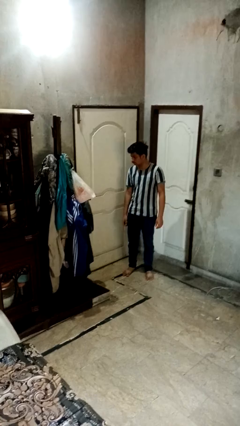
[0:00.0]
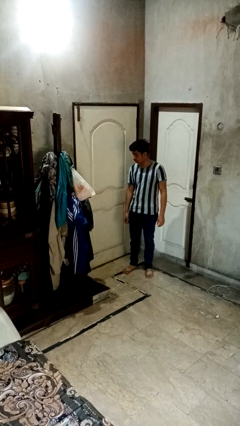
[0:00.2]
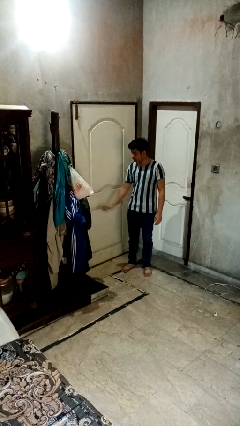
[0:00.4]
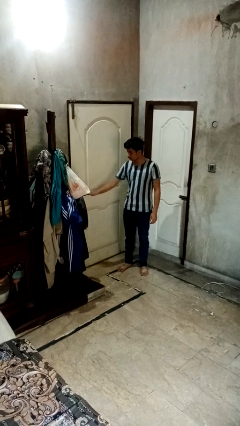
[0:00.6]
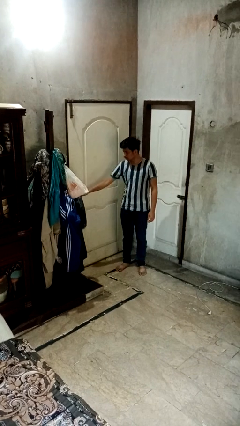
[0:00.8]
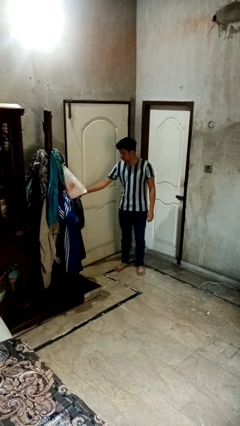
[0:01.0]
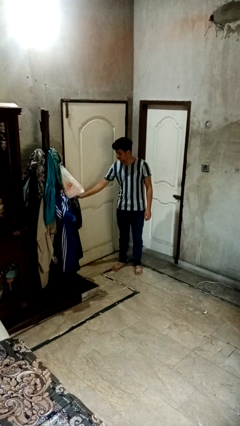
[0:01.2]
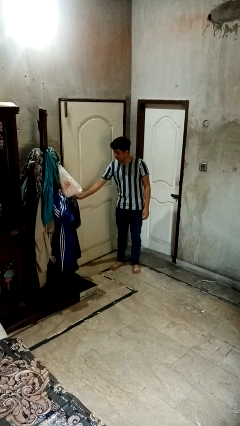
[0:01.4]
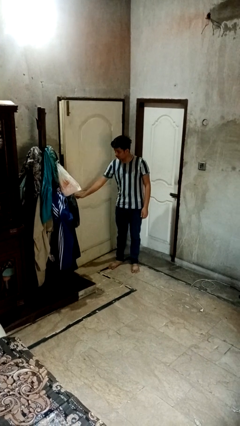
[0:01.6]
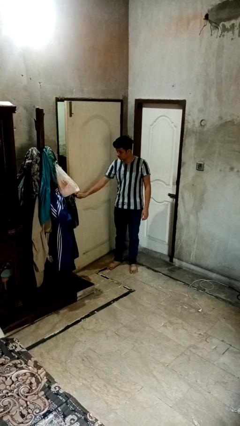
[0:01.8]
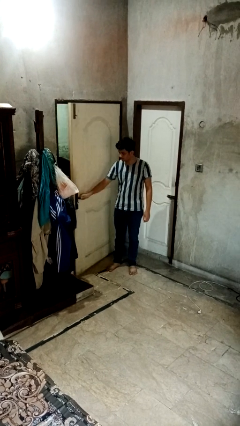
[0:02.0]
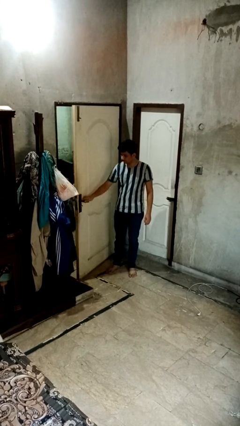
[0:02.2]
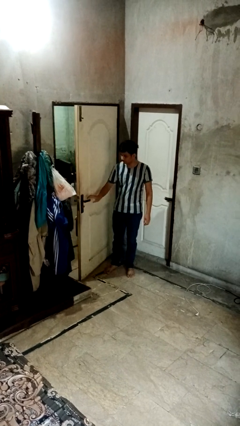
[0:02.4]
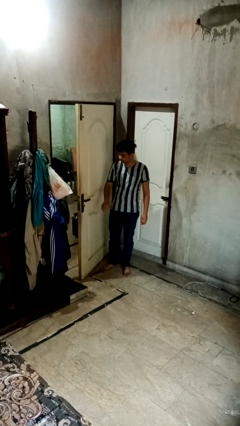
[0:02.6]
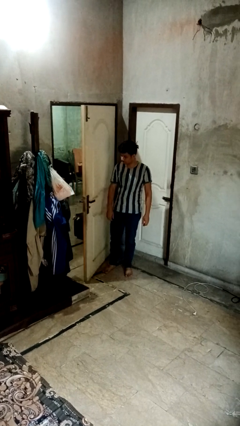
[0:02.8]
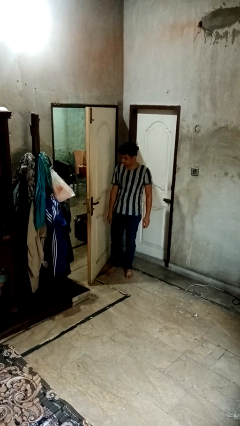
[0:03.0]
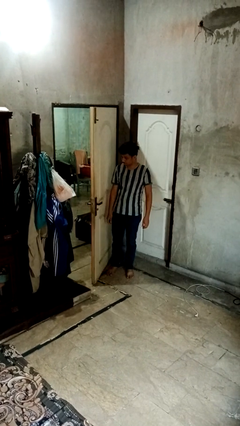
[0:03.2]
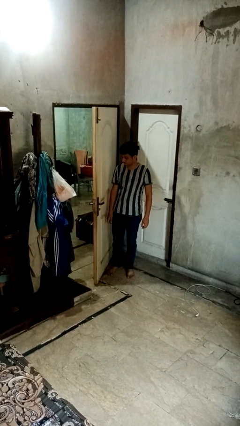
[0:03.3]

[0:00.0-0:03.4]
person opens facility door

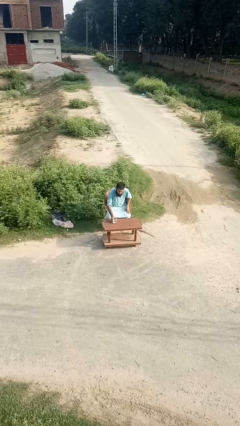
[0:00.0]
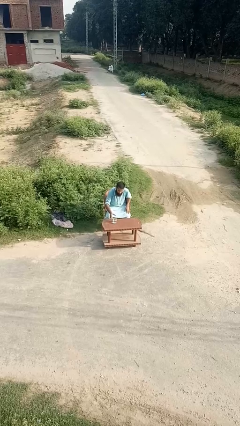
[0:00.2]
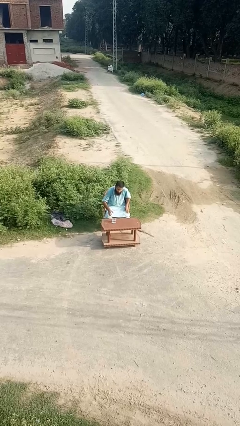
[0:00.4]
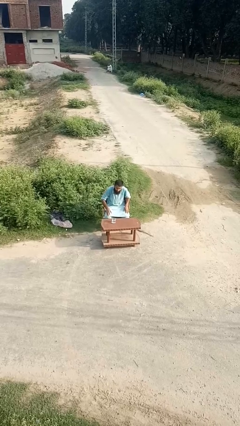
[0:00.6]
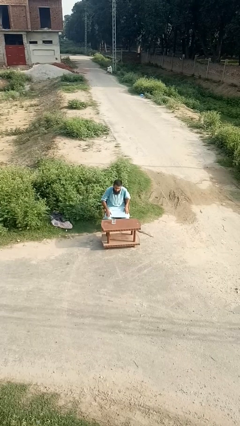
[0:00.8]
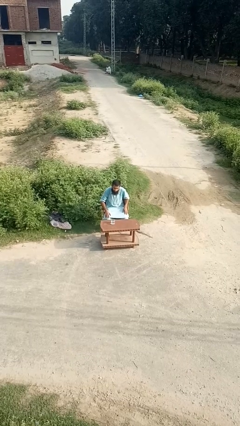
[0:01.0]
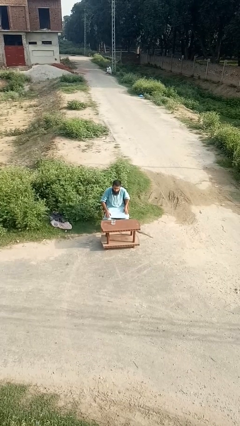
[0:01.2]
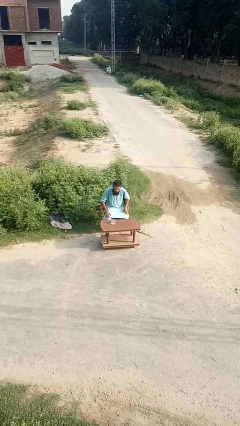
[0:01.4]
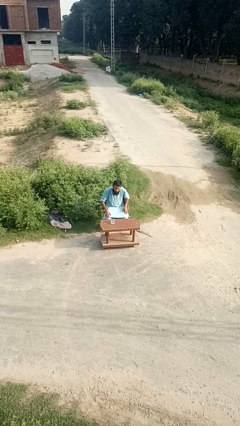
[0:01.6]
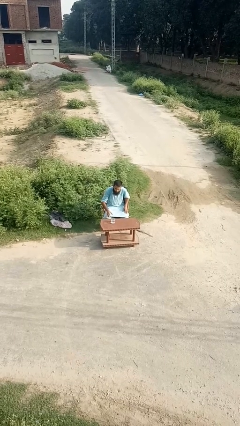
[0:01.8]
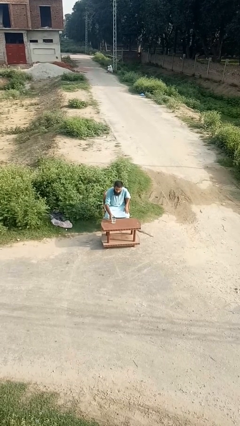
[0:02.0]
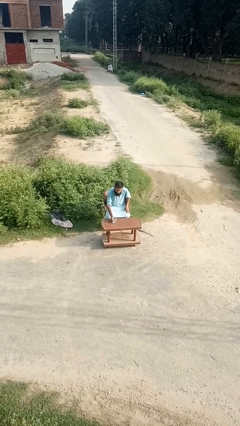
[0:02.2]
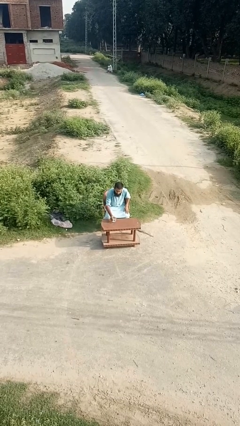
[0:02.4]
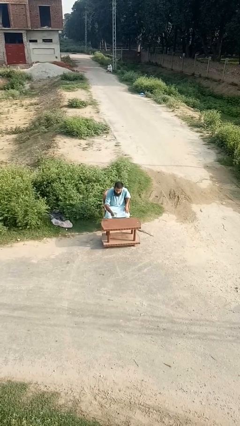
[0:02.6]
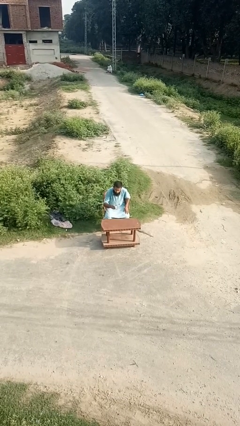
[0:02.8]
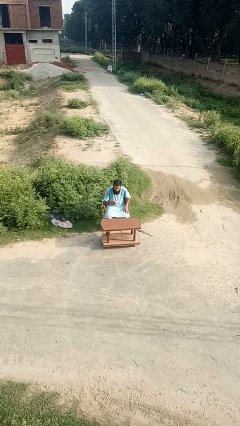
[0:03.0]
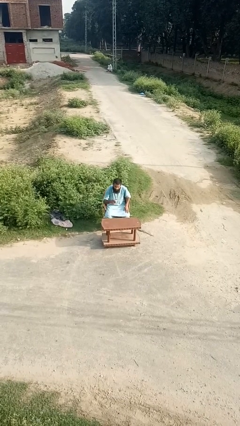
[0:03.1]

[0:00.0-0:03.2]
person picks up object from table

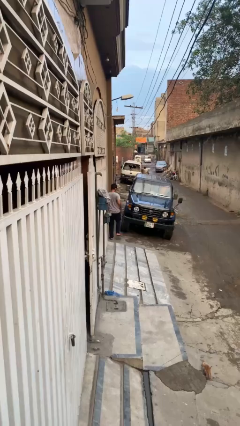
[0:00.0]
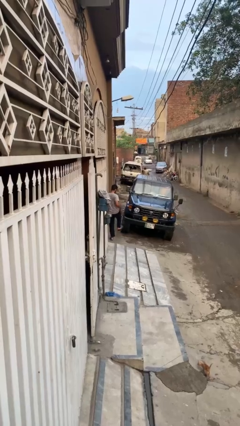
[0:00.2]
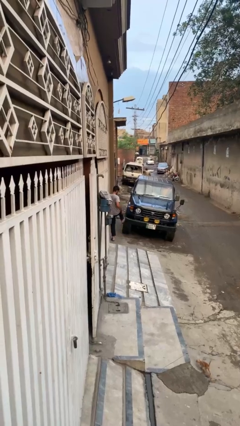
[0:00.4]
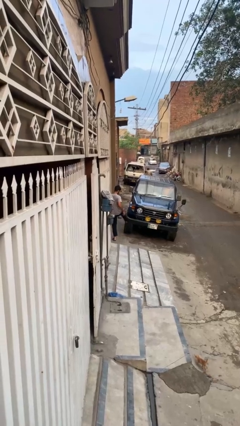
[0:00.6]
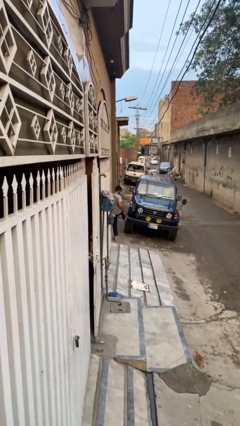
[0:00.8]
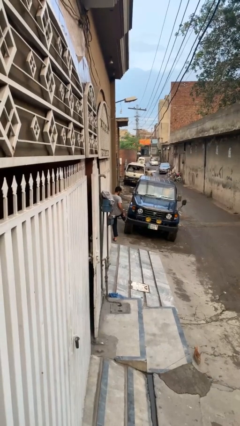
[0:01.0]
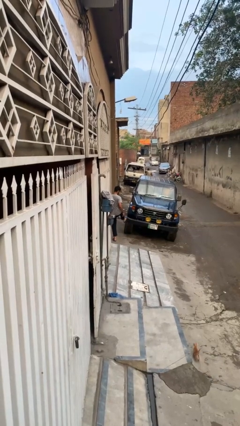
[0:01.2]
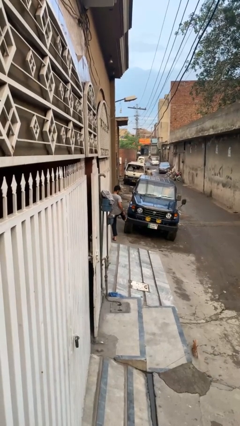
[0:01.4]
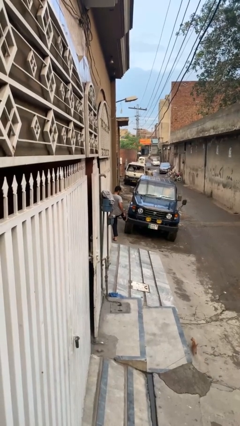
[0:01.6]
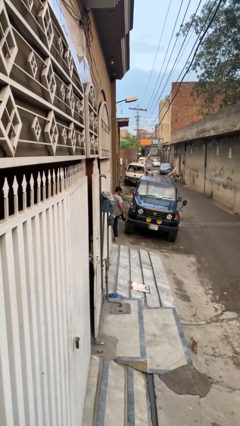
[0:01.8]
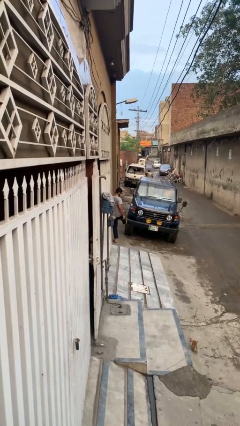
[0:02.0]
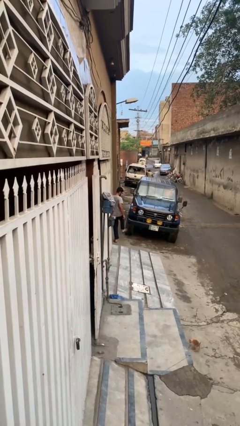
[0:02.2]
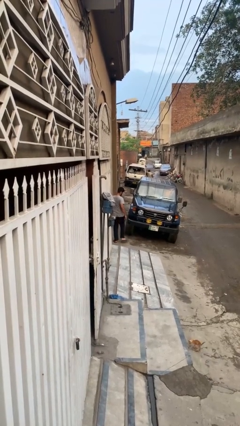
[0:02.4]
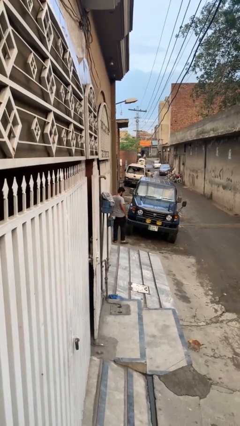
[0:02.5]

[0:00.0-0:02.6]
person kicks car tires

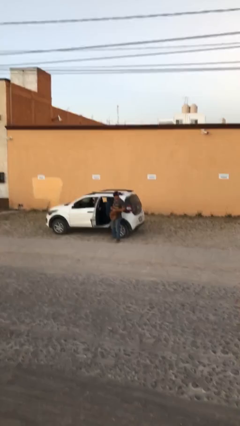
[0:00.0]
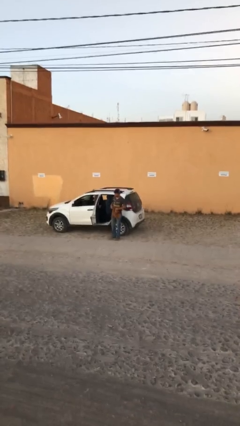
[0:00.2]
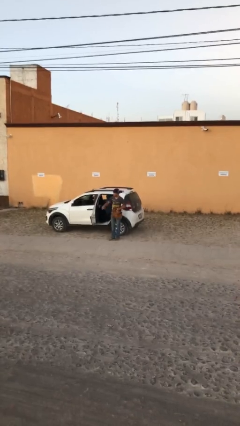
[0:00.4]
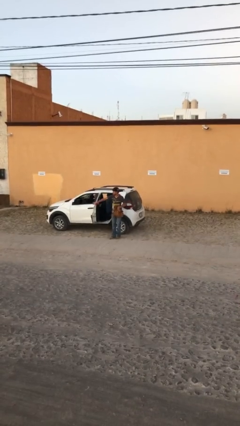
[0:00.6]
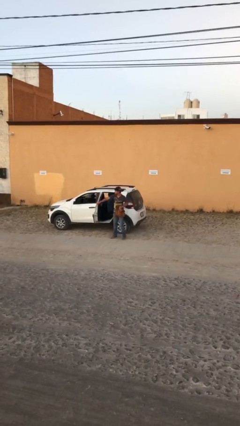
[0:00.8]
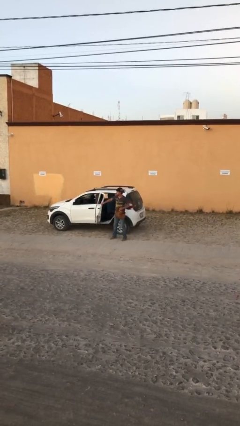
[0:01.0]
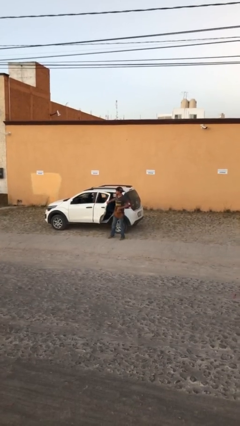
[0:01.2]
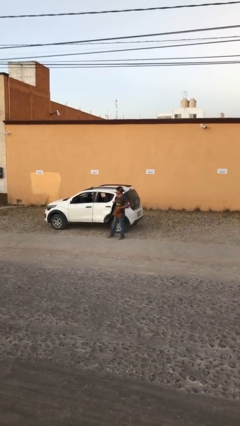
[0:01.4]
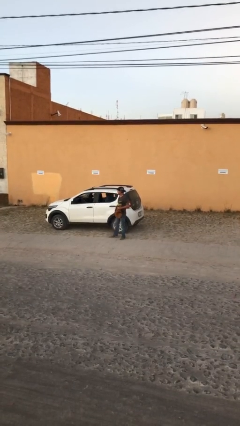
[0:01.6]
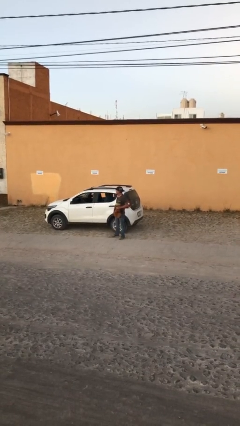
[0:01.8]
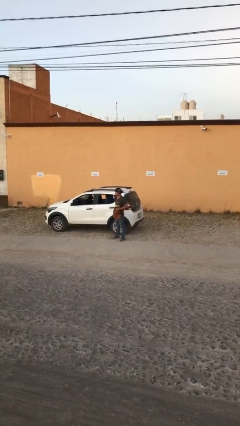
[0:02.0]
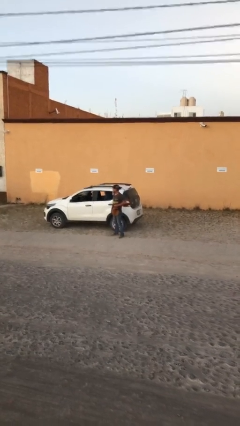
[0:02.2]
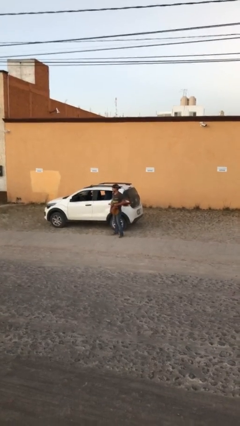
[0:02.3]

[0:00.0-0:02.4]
person closes car door

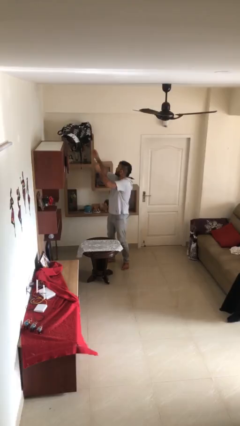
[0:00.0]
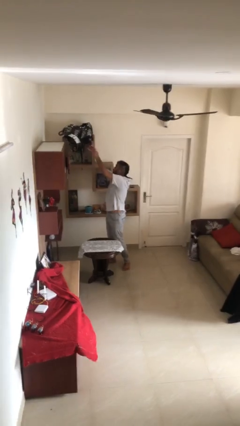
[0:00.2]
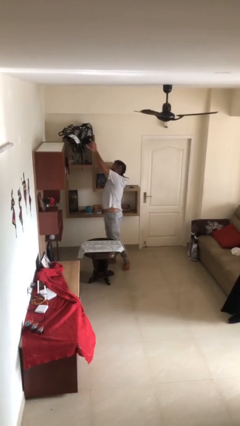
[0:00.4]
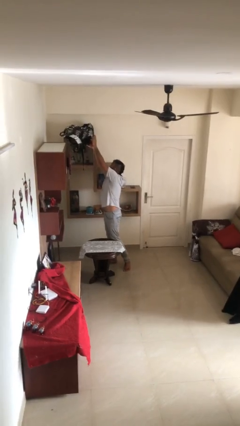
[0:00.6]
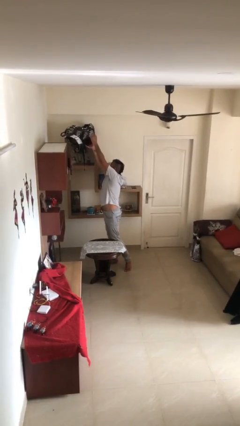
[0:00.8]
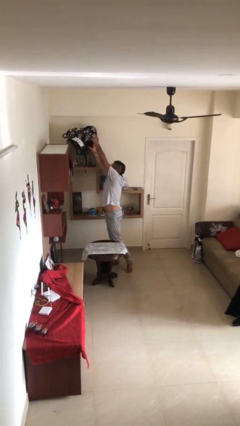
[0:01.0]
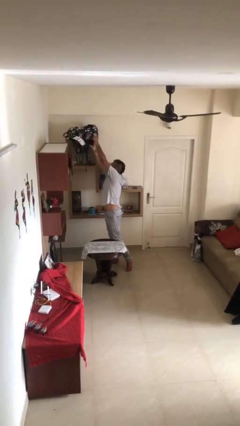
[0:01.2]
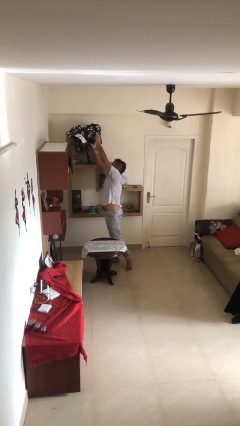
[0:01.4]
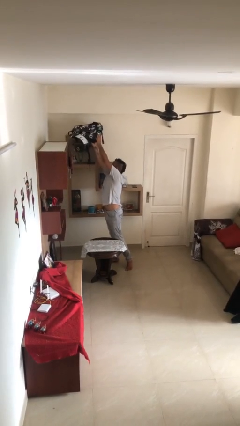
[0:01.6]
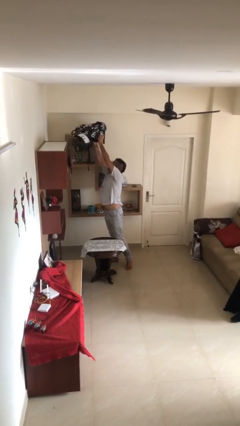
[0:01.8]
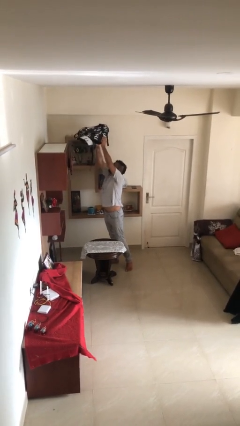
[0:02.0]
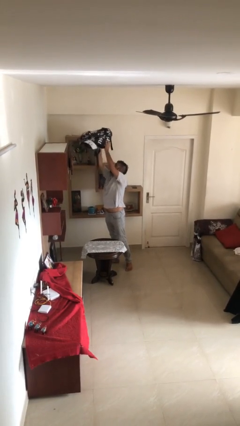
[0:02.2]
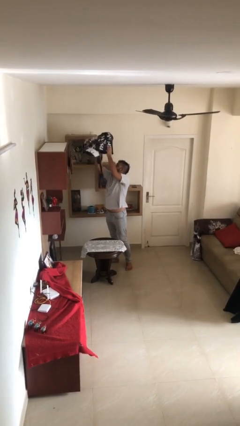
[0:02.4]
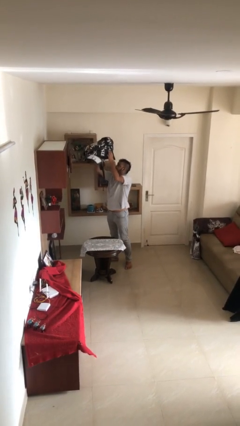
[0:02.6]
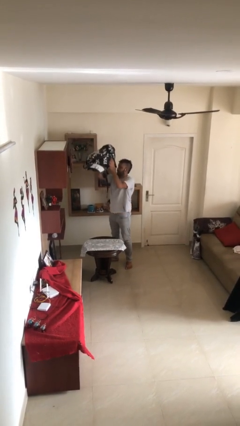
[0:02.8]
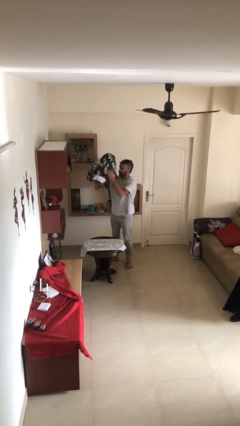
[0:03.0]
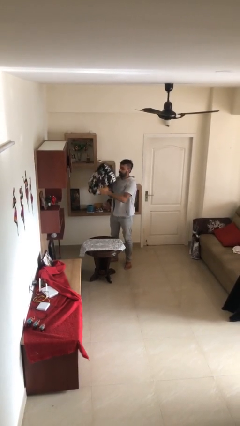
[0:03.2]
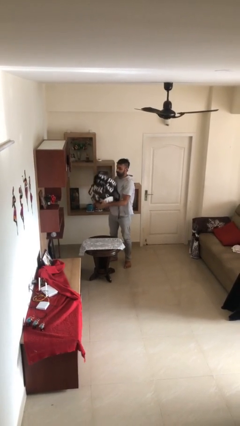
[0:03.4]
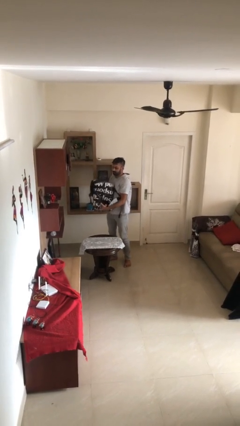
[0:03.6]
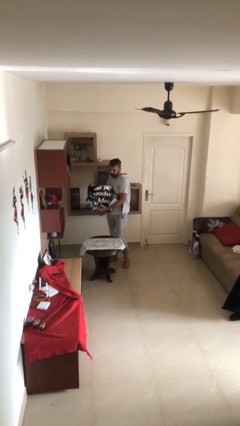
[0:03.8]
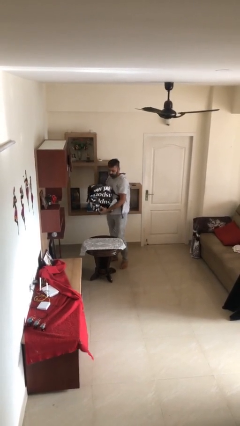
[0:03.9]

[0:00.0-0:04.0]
person picks up object from shelf

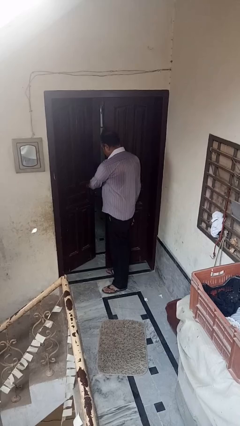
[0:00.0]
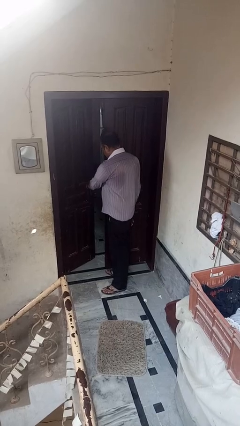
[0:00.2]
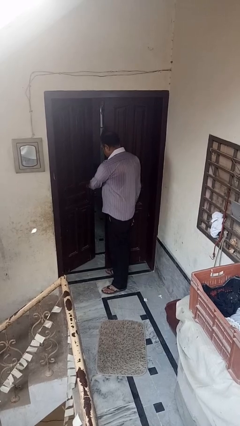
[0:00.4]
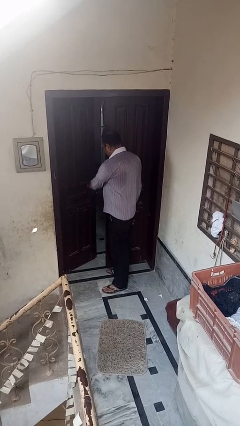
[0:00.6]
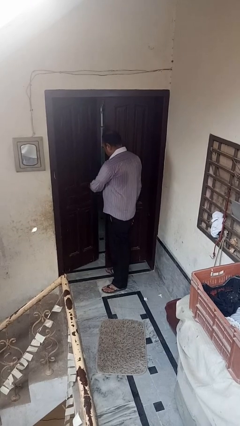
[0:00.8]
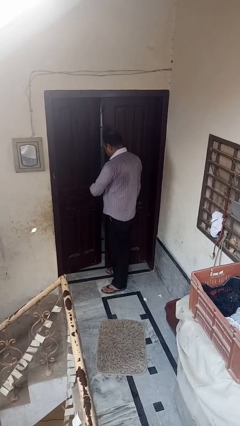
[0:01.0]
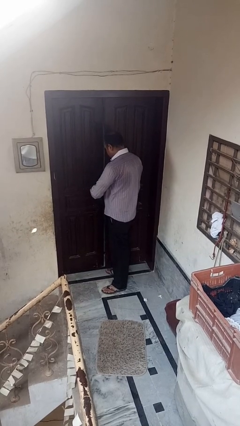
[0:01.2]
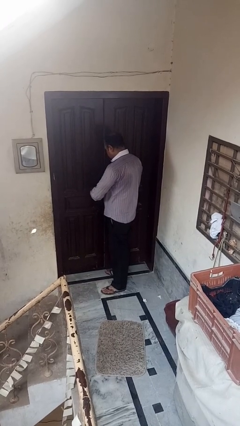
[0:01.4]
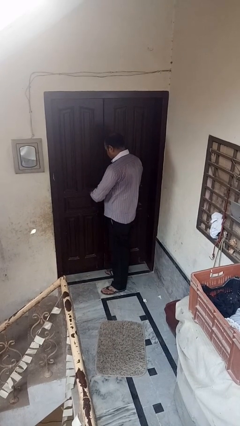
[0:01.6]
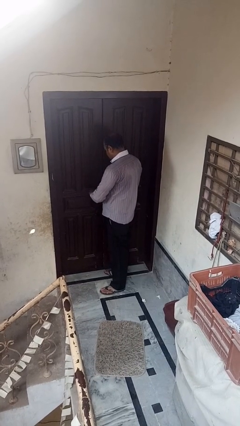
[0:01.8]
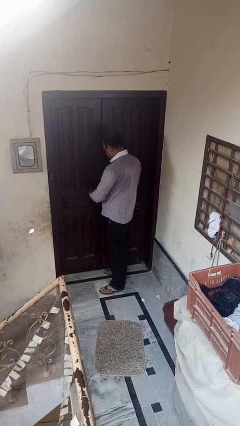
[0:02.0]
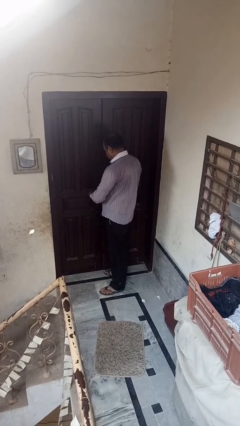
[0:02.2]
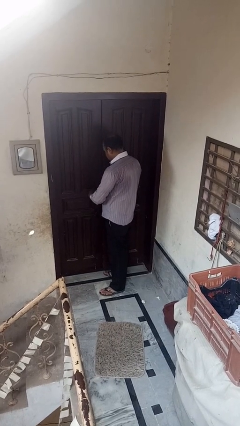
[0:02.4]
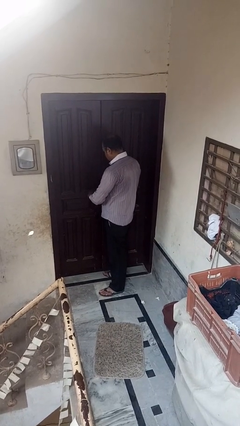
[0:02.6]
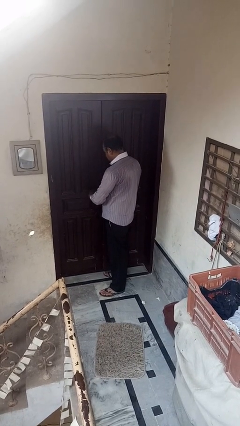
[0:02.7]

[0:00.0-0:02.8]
person closes facility door
